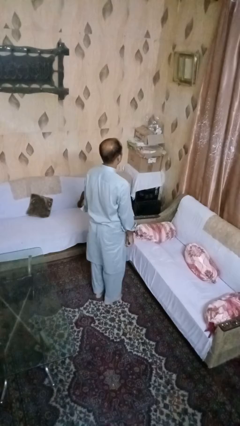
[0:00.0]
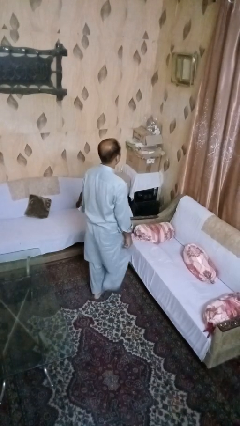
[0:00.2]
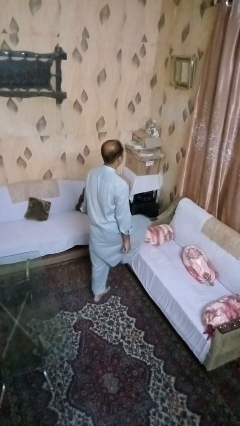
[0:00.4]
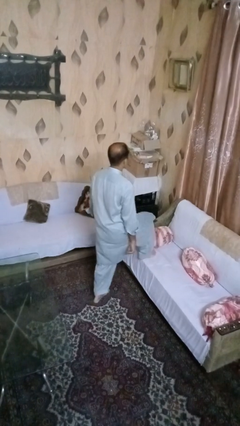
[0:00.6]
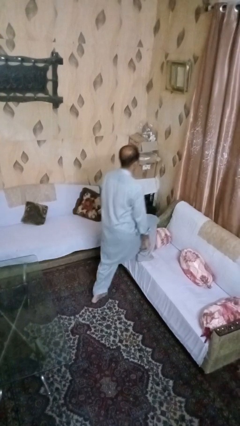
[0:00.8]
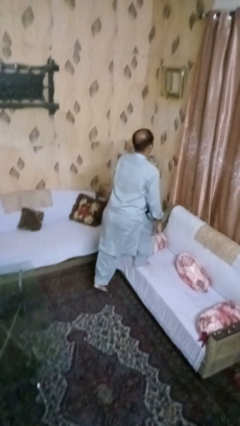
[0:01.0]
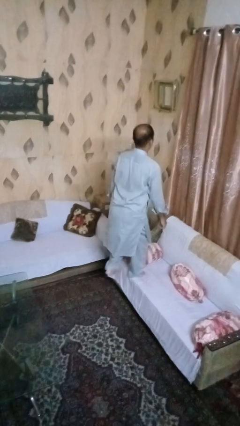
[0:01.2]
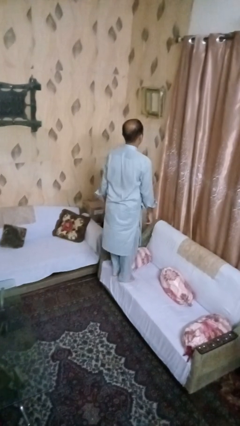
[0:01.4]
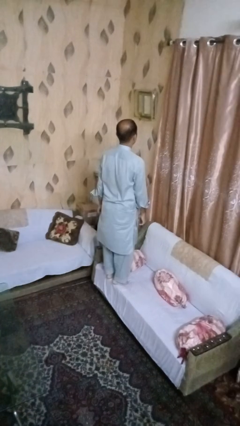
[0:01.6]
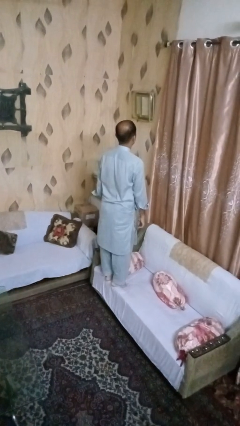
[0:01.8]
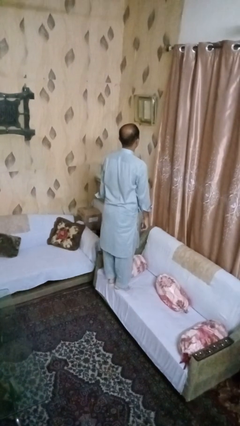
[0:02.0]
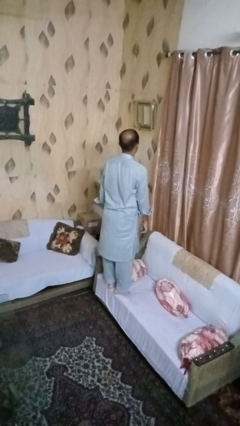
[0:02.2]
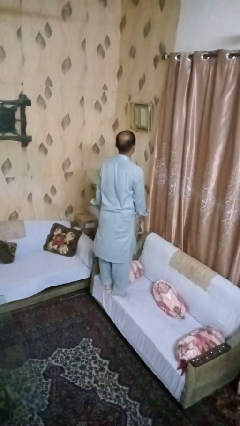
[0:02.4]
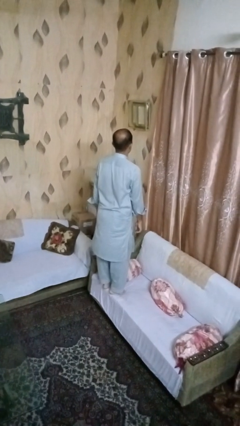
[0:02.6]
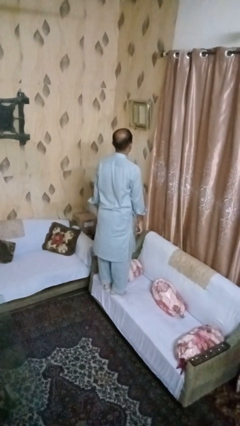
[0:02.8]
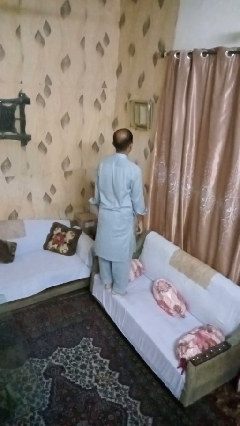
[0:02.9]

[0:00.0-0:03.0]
person climbs on couch

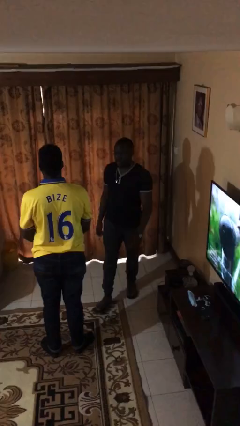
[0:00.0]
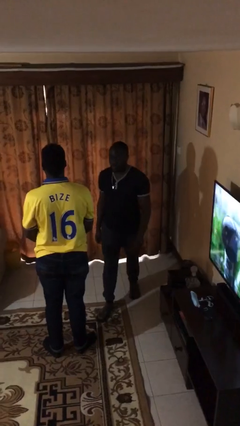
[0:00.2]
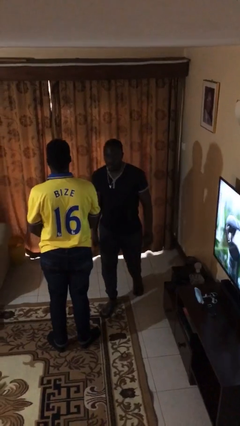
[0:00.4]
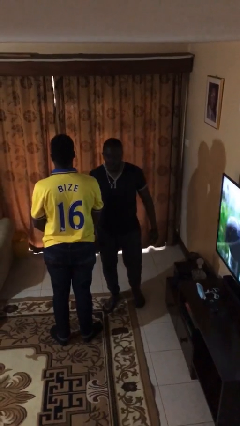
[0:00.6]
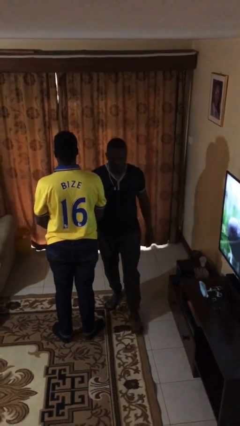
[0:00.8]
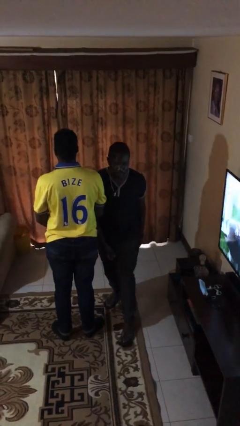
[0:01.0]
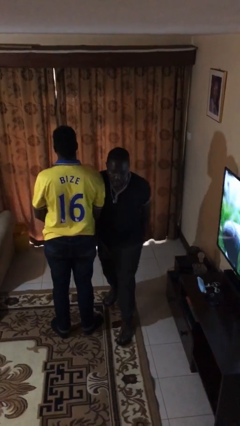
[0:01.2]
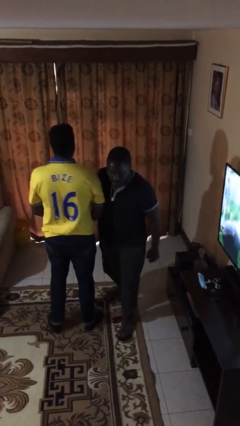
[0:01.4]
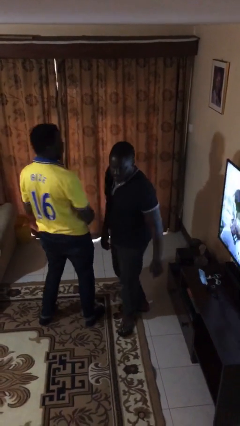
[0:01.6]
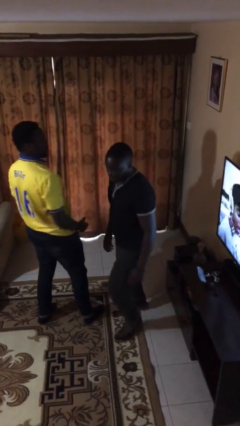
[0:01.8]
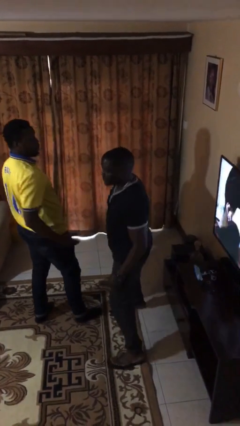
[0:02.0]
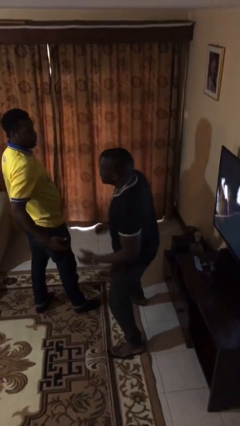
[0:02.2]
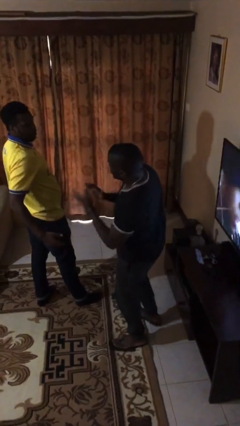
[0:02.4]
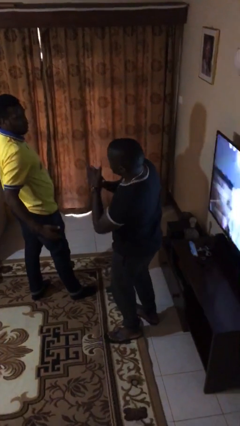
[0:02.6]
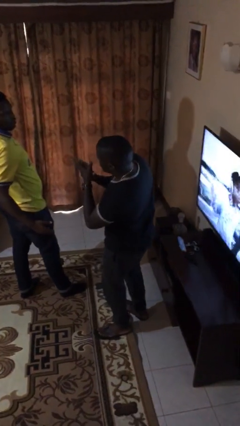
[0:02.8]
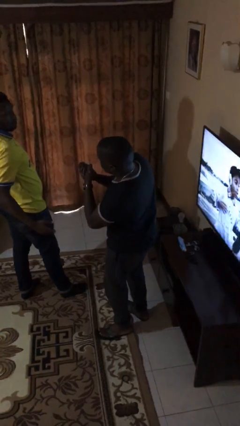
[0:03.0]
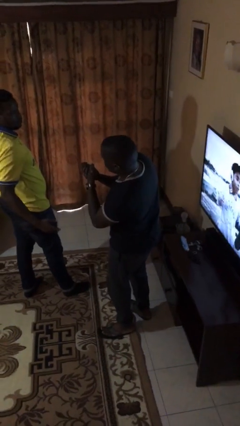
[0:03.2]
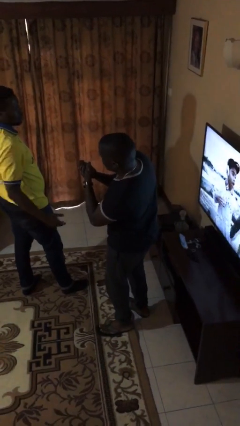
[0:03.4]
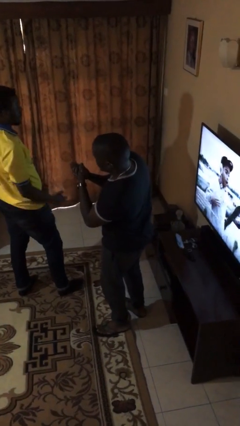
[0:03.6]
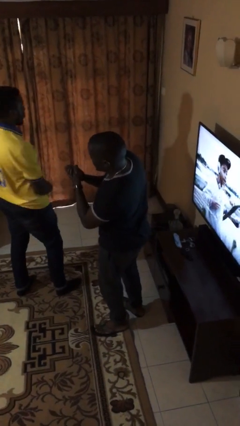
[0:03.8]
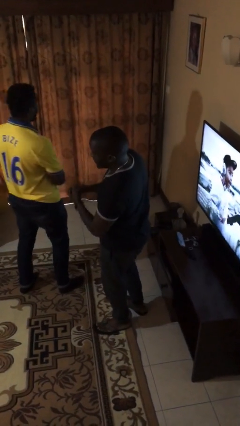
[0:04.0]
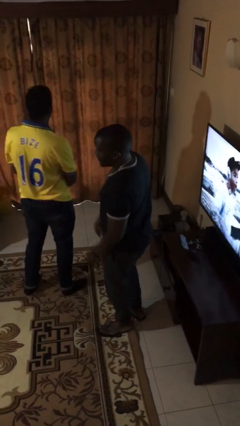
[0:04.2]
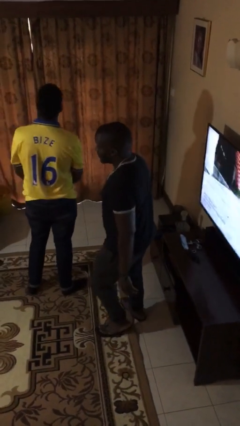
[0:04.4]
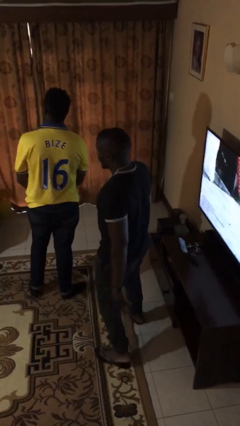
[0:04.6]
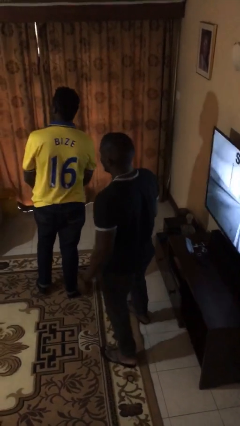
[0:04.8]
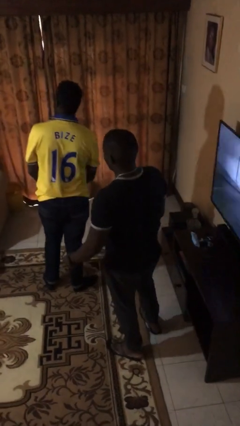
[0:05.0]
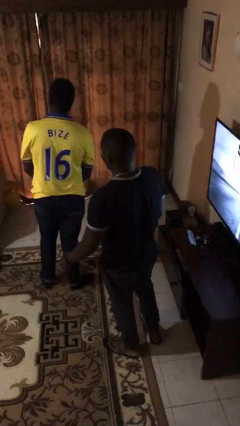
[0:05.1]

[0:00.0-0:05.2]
person bumps into person

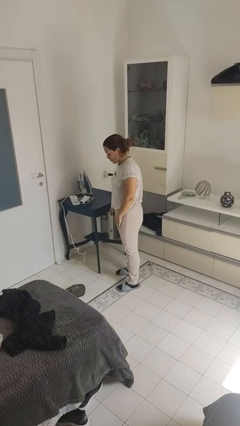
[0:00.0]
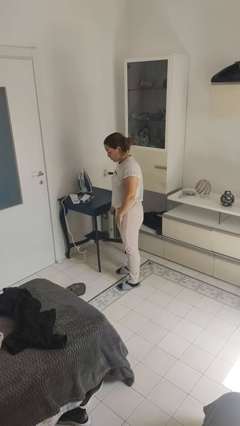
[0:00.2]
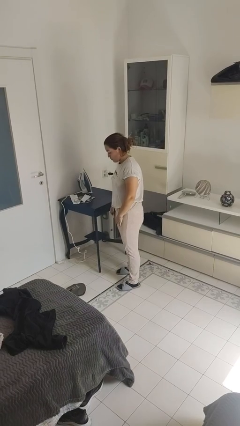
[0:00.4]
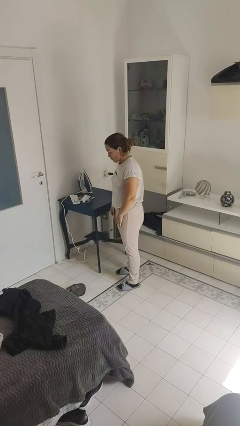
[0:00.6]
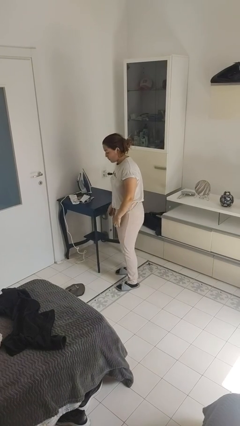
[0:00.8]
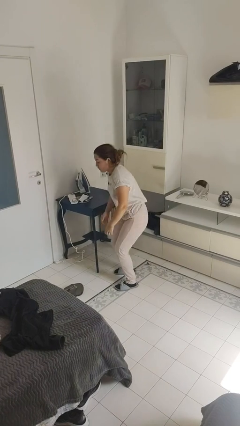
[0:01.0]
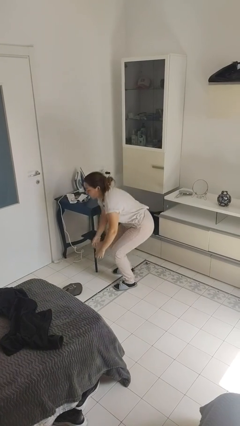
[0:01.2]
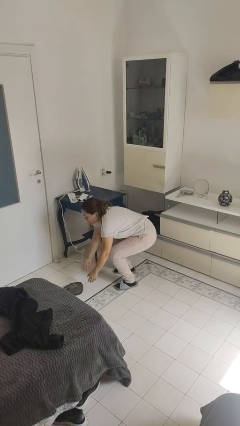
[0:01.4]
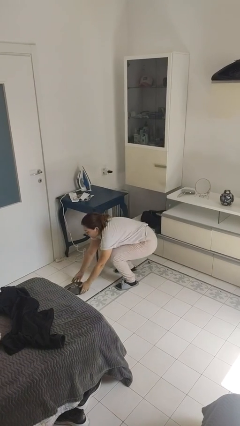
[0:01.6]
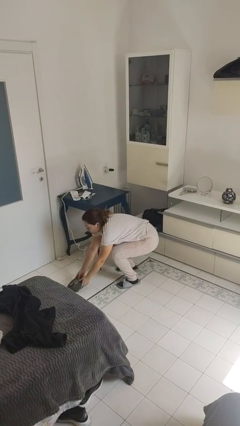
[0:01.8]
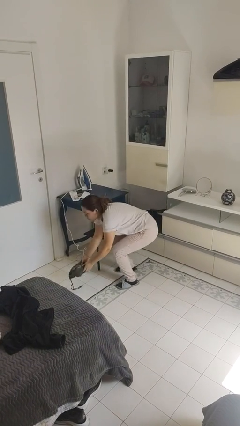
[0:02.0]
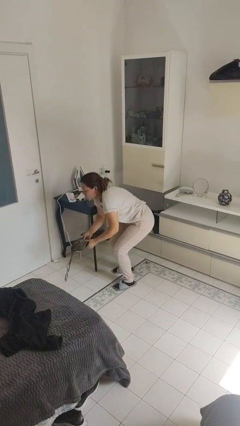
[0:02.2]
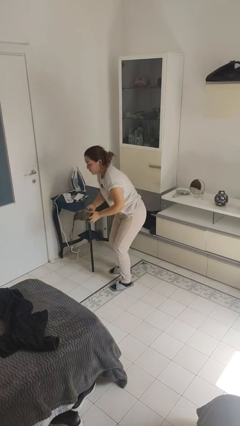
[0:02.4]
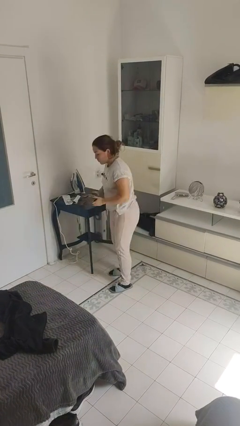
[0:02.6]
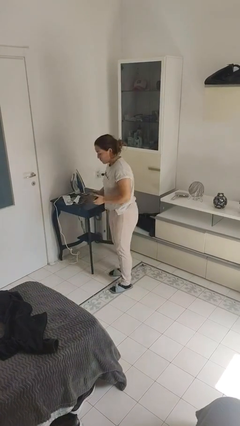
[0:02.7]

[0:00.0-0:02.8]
person picks up object from floor

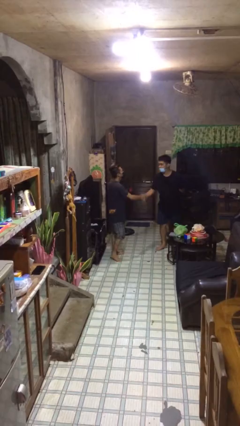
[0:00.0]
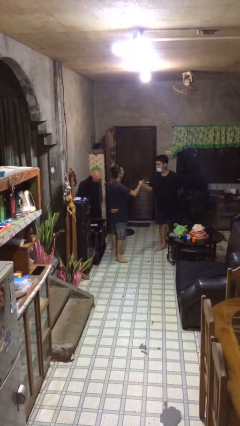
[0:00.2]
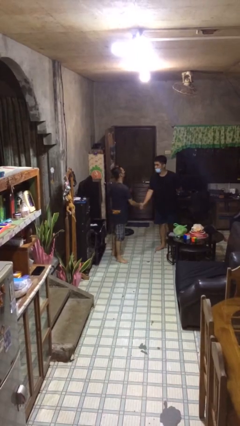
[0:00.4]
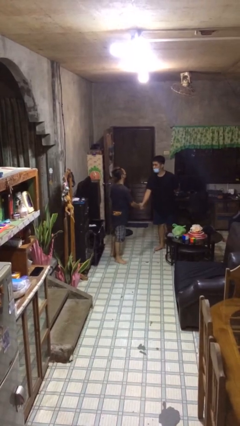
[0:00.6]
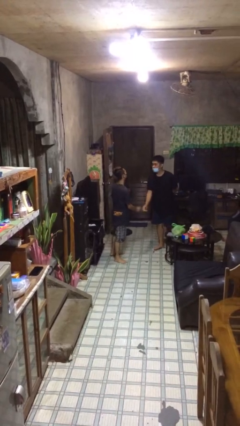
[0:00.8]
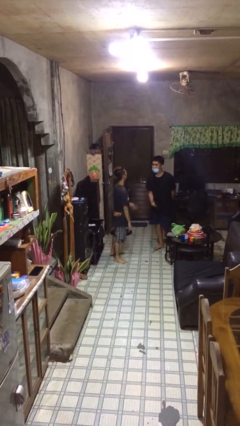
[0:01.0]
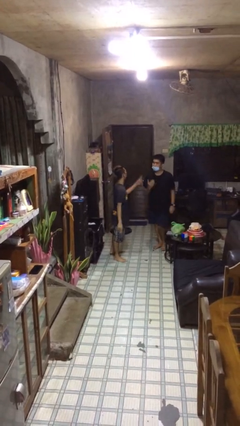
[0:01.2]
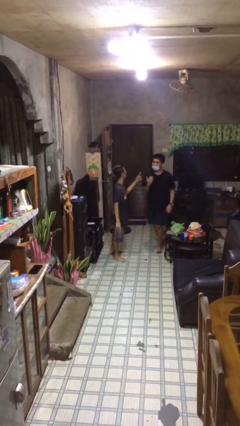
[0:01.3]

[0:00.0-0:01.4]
person shakes hand

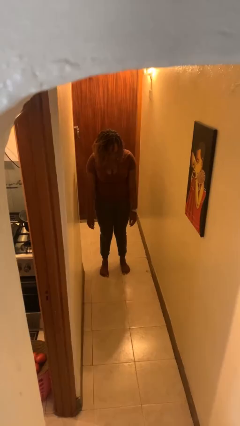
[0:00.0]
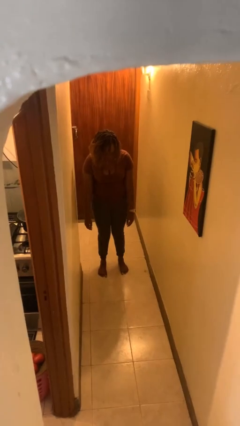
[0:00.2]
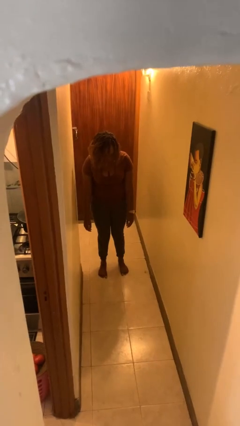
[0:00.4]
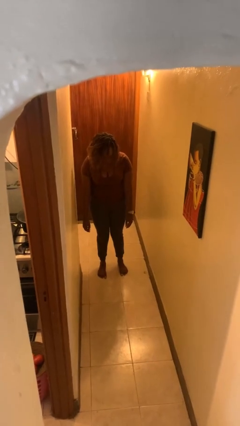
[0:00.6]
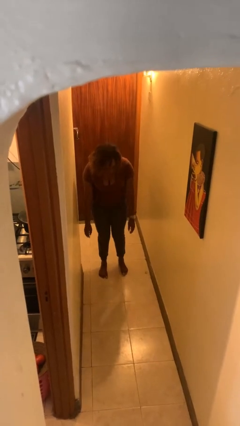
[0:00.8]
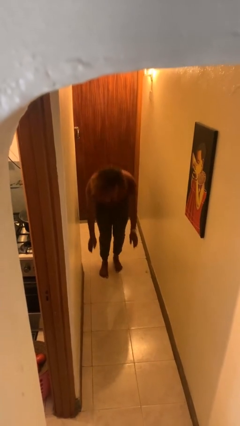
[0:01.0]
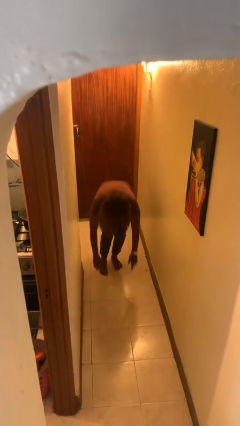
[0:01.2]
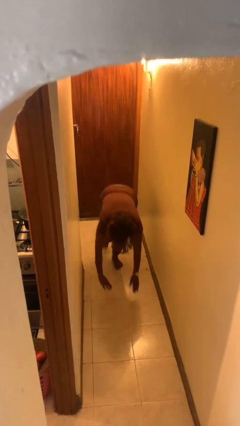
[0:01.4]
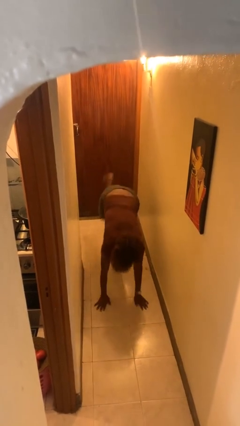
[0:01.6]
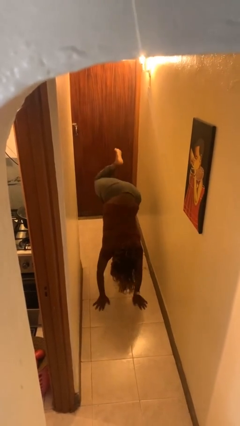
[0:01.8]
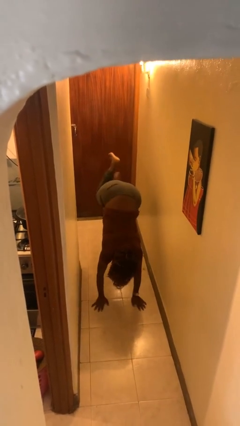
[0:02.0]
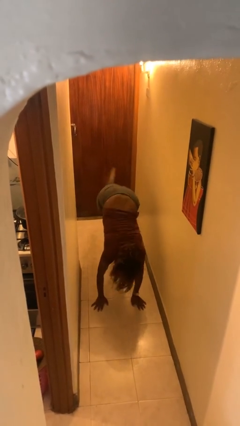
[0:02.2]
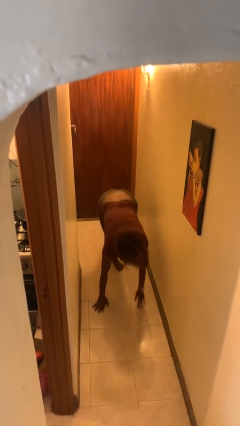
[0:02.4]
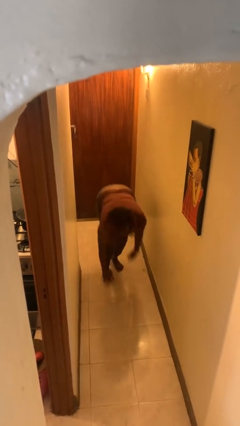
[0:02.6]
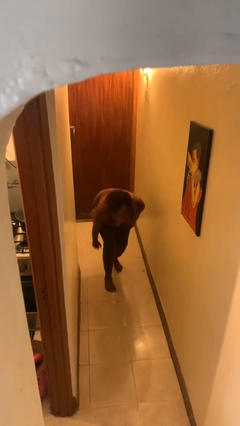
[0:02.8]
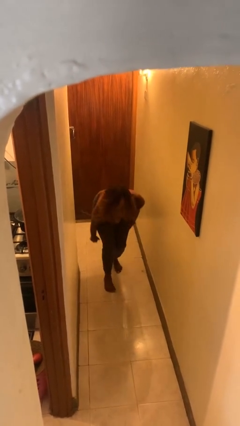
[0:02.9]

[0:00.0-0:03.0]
person handstand

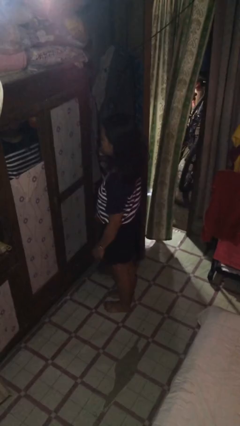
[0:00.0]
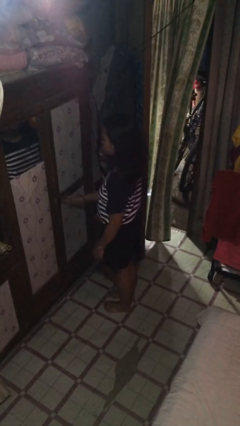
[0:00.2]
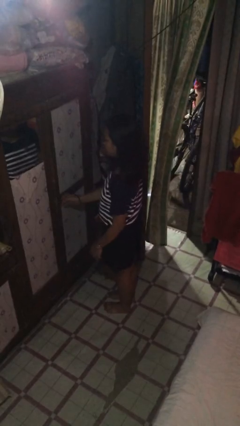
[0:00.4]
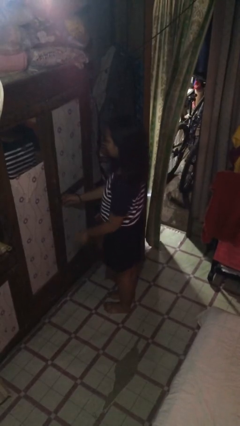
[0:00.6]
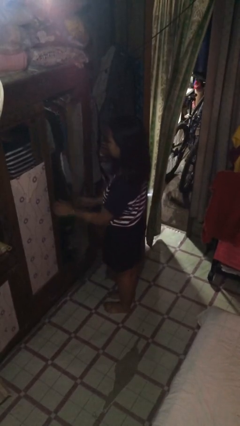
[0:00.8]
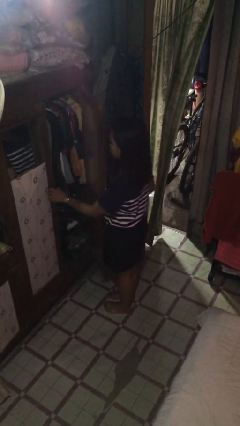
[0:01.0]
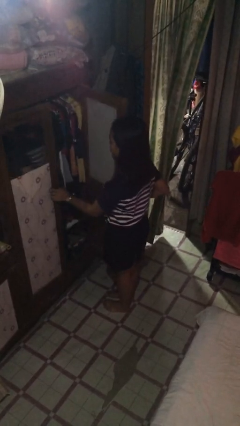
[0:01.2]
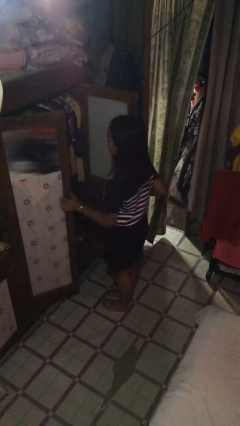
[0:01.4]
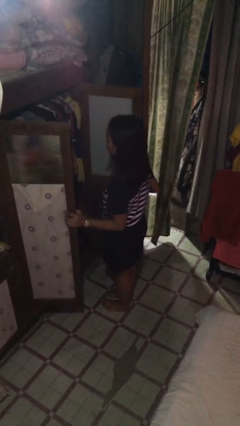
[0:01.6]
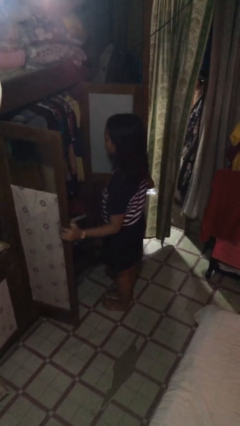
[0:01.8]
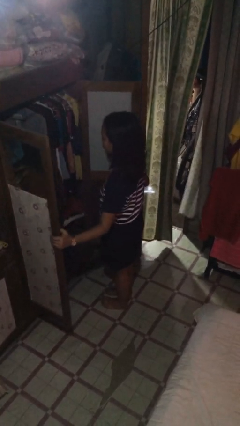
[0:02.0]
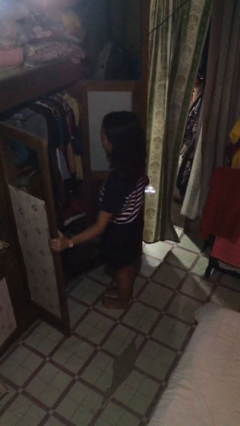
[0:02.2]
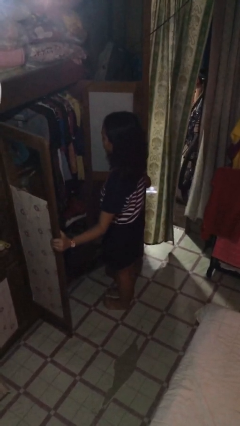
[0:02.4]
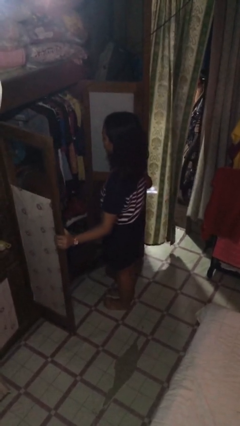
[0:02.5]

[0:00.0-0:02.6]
person opens closet door
